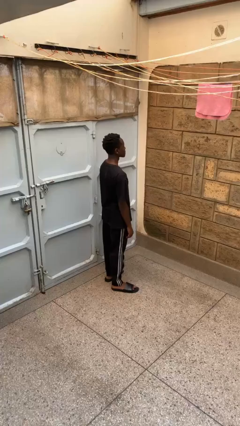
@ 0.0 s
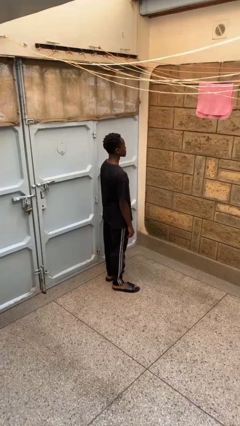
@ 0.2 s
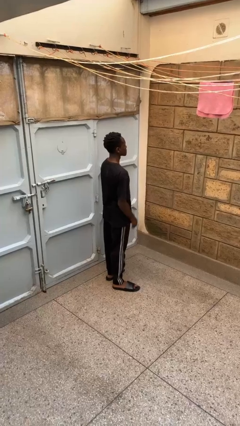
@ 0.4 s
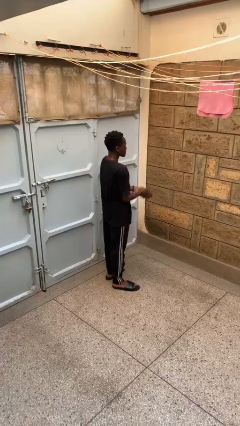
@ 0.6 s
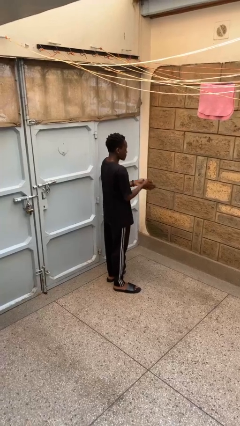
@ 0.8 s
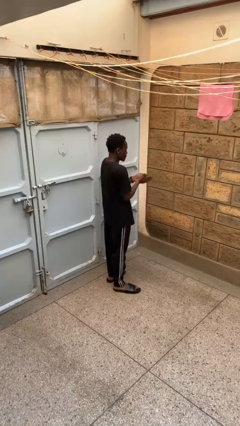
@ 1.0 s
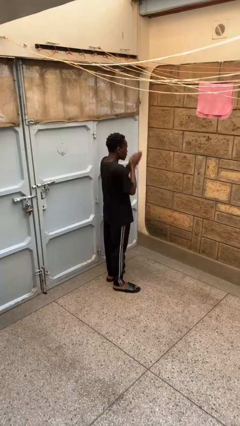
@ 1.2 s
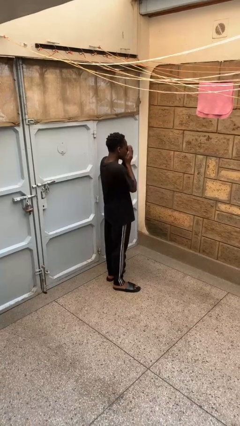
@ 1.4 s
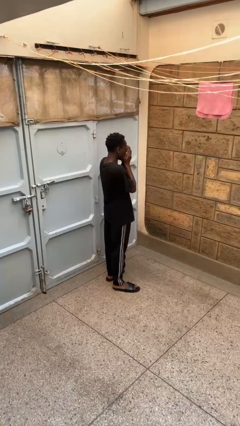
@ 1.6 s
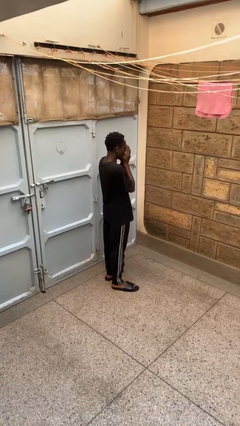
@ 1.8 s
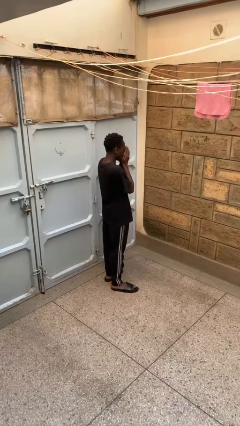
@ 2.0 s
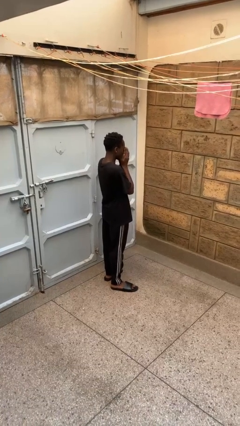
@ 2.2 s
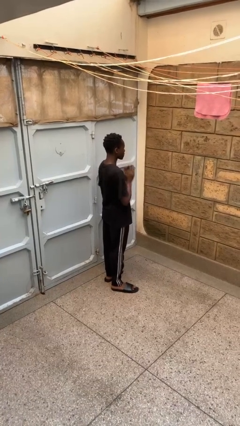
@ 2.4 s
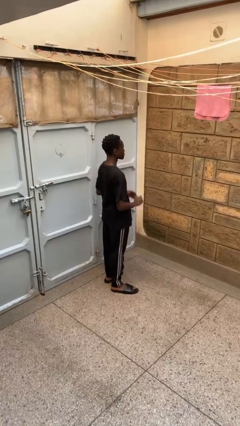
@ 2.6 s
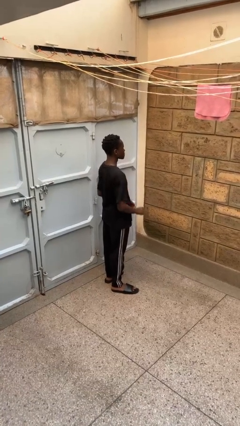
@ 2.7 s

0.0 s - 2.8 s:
person blows into hands

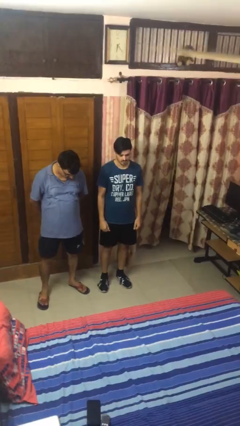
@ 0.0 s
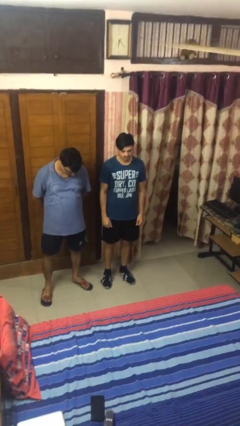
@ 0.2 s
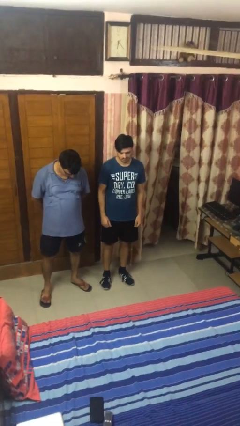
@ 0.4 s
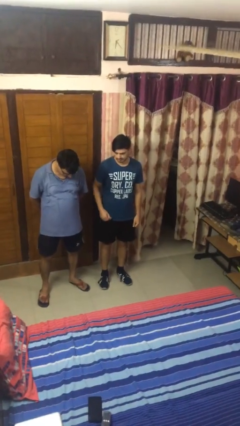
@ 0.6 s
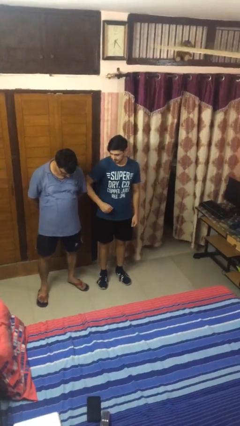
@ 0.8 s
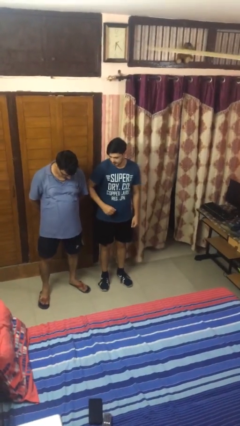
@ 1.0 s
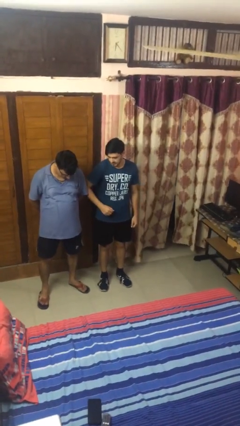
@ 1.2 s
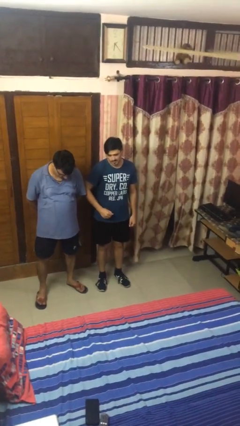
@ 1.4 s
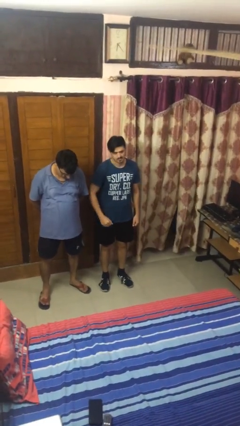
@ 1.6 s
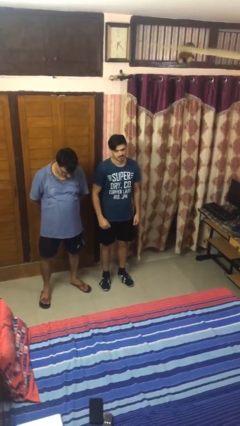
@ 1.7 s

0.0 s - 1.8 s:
person nudges person with elbow

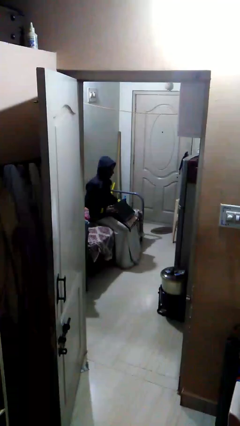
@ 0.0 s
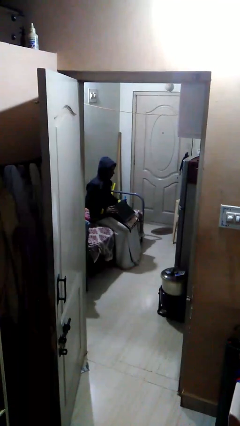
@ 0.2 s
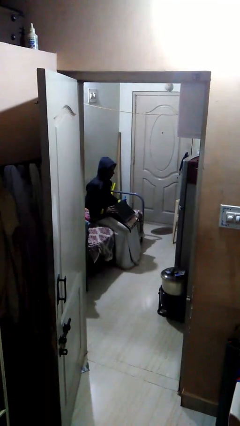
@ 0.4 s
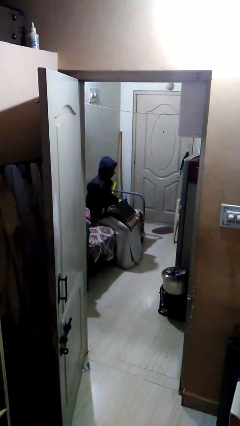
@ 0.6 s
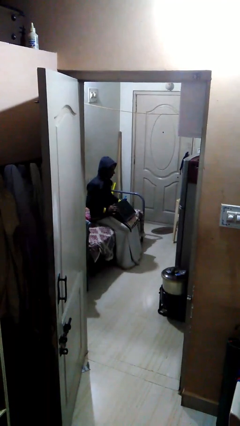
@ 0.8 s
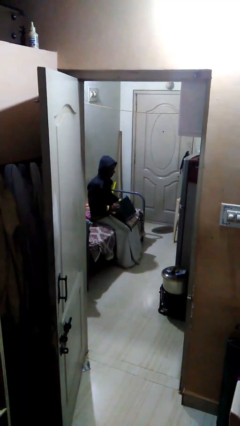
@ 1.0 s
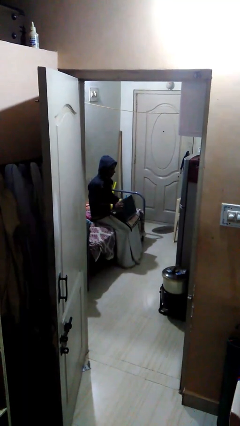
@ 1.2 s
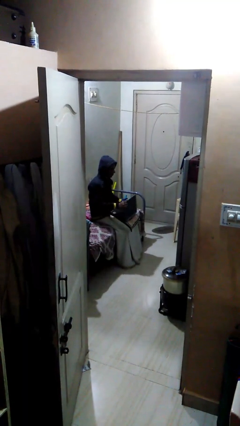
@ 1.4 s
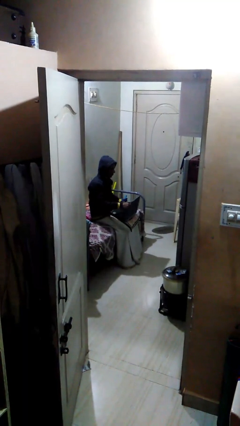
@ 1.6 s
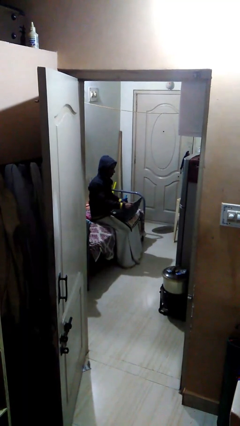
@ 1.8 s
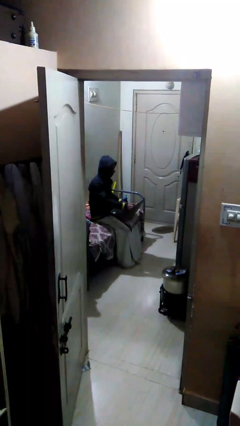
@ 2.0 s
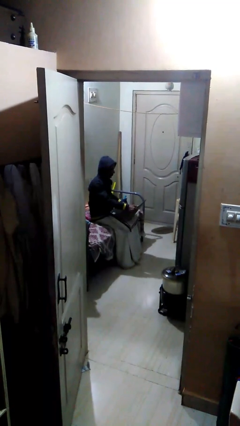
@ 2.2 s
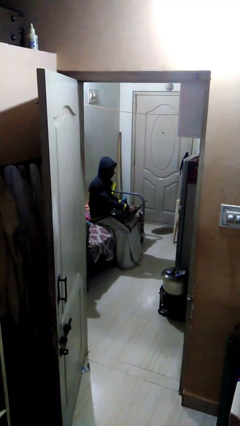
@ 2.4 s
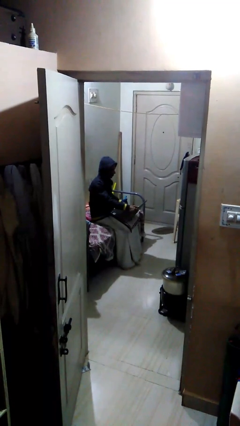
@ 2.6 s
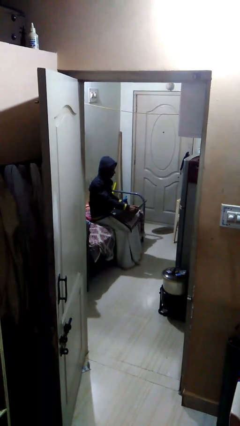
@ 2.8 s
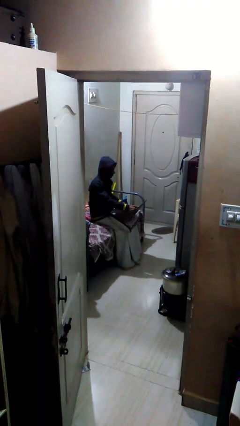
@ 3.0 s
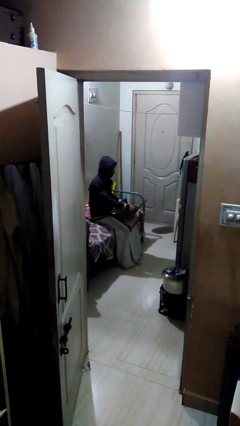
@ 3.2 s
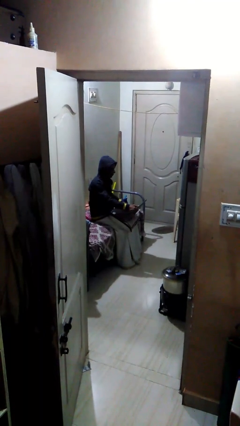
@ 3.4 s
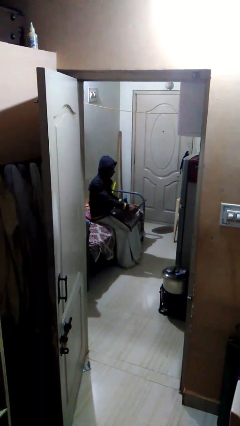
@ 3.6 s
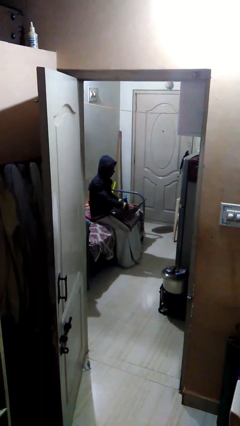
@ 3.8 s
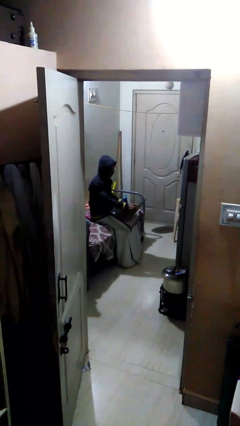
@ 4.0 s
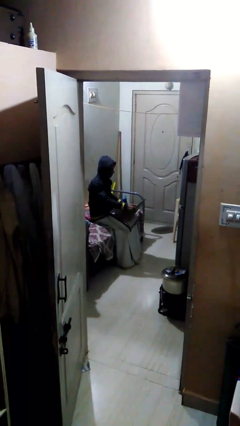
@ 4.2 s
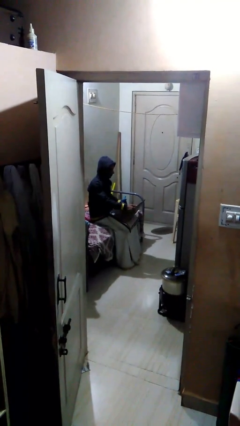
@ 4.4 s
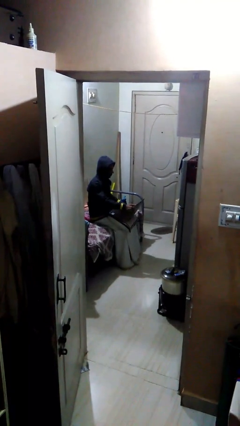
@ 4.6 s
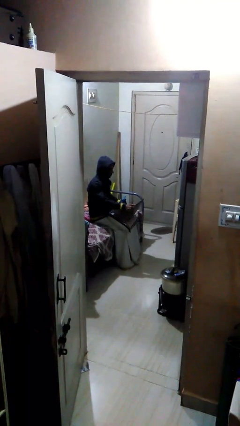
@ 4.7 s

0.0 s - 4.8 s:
person interacts with laptop

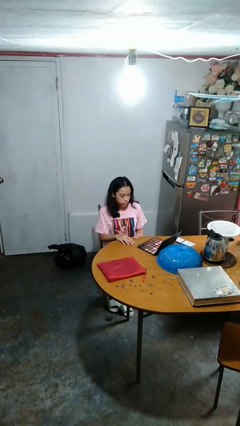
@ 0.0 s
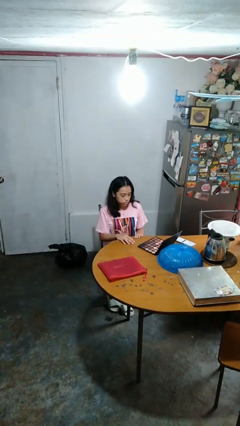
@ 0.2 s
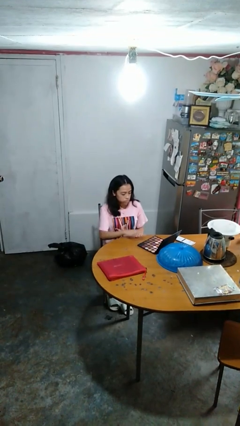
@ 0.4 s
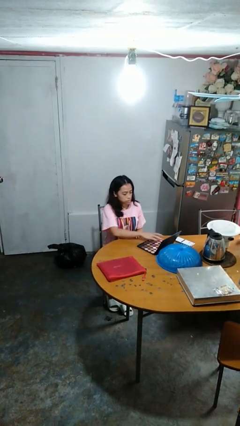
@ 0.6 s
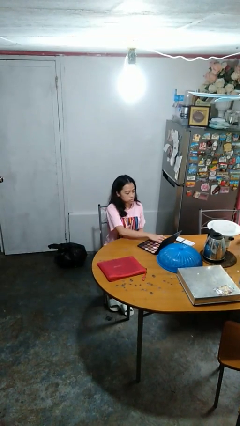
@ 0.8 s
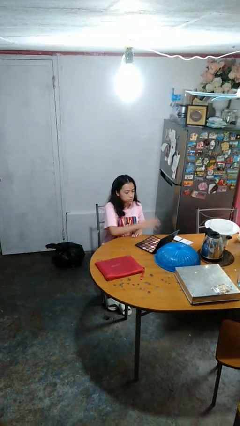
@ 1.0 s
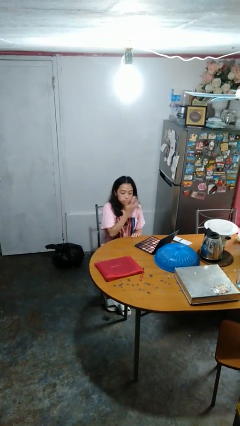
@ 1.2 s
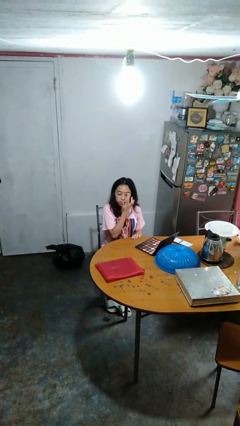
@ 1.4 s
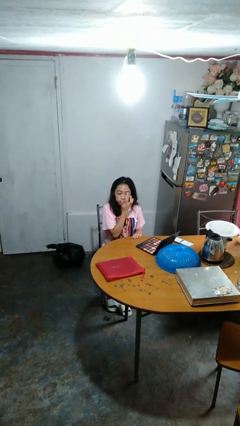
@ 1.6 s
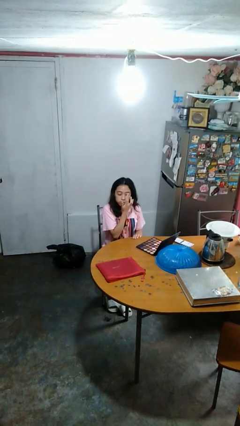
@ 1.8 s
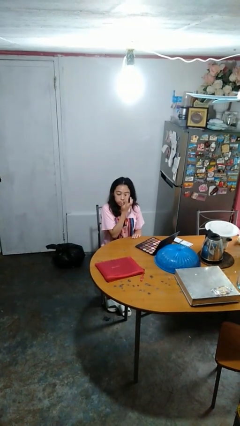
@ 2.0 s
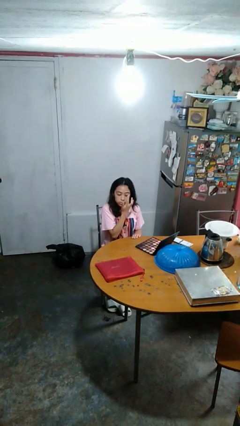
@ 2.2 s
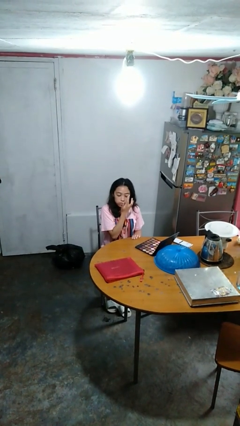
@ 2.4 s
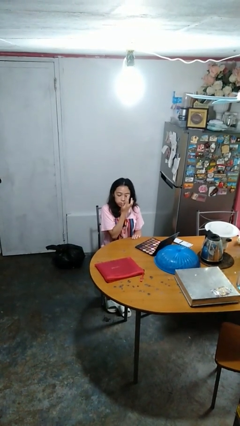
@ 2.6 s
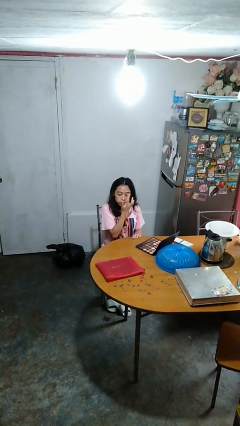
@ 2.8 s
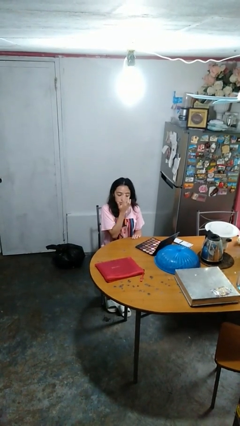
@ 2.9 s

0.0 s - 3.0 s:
person applies eye makeup

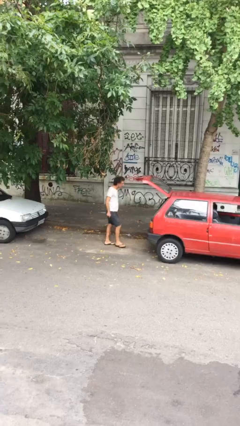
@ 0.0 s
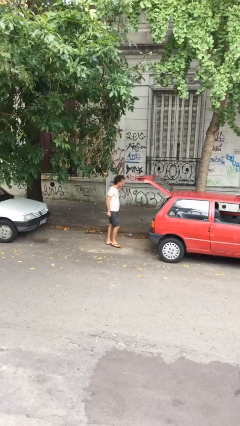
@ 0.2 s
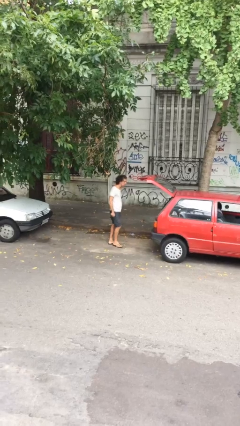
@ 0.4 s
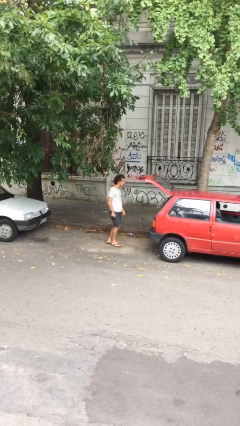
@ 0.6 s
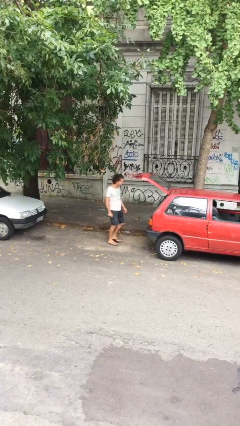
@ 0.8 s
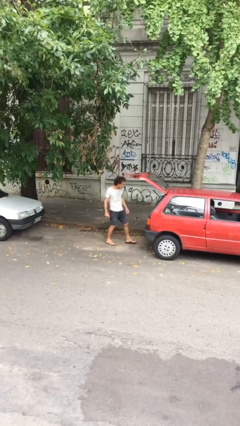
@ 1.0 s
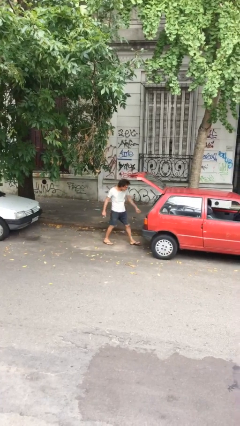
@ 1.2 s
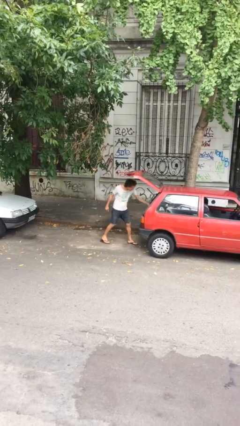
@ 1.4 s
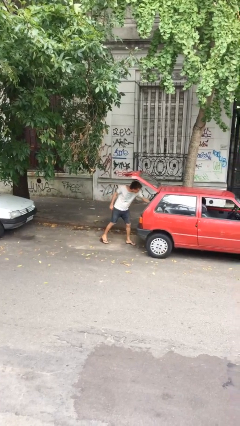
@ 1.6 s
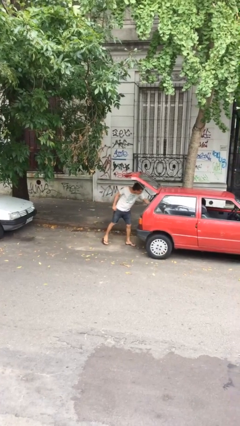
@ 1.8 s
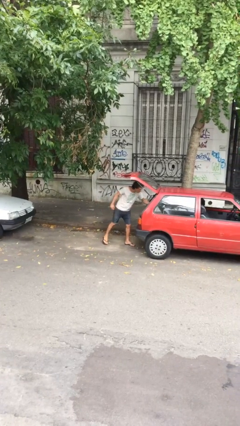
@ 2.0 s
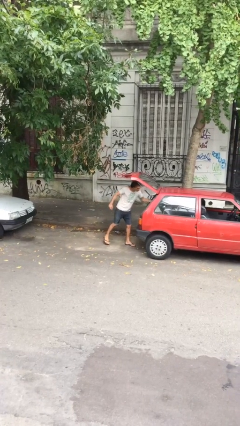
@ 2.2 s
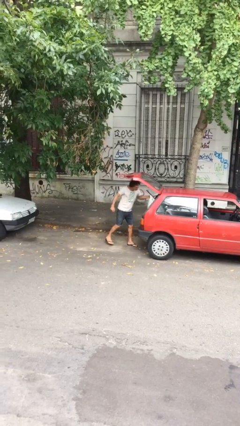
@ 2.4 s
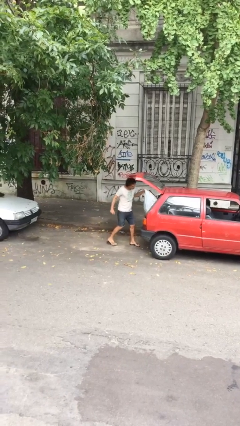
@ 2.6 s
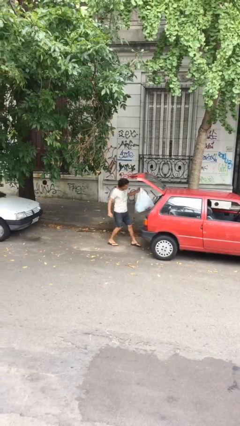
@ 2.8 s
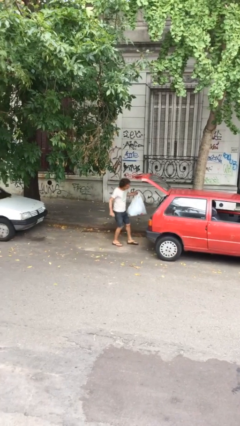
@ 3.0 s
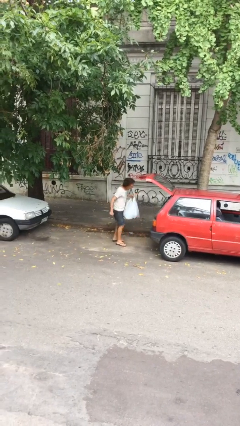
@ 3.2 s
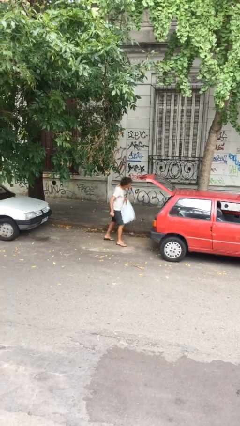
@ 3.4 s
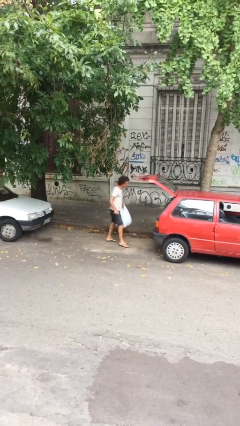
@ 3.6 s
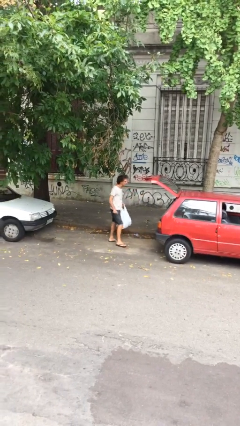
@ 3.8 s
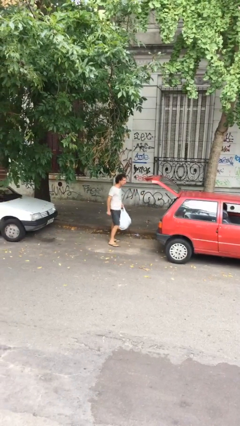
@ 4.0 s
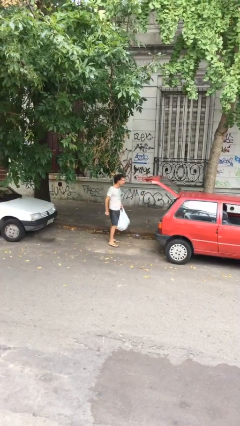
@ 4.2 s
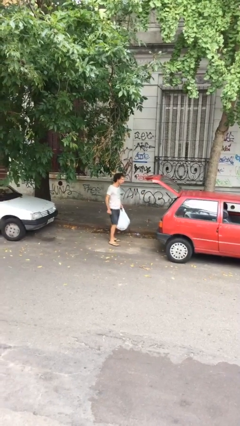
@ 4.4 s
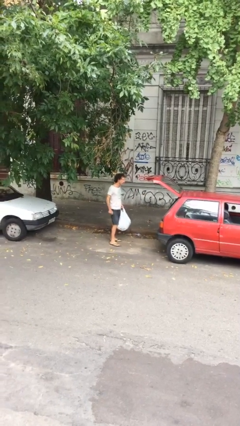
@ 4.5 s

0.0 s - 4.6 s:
person unloads car

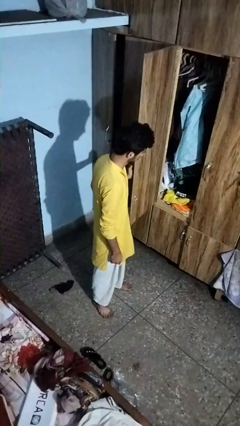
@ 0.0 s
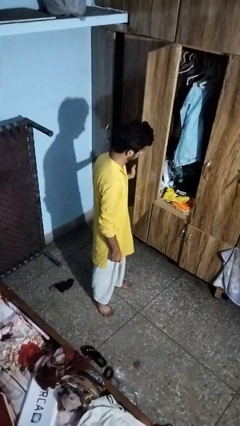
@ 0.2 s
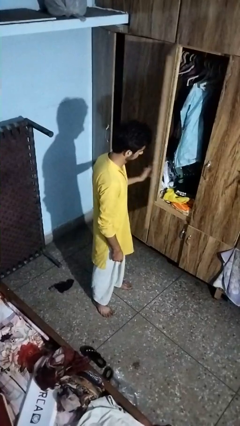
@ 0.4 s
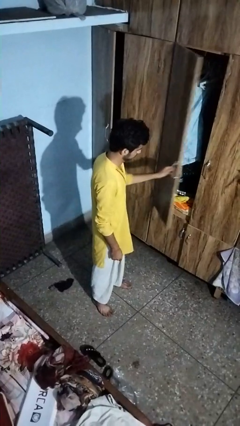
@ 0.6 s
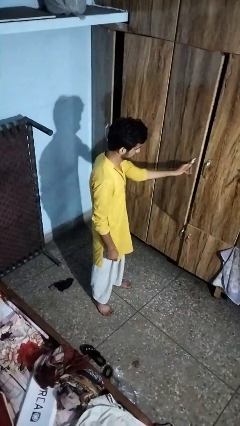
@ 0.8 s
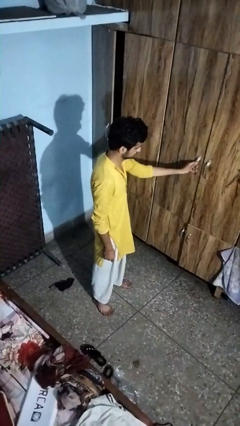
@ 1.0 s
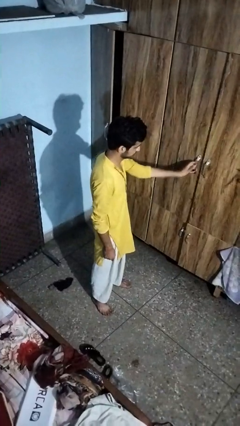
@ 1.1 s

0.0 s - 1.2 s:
person closes closet door
